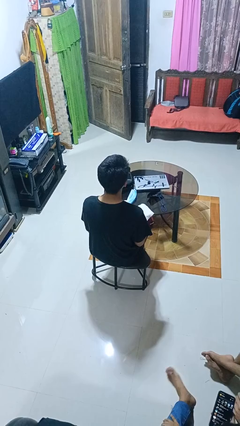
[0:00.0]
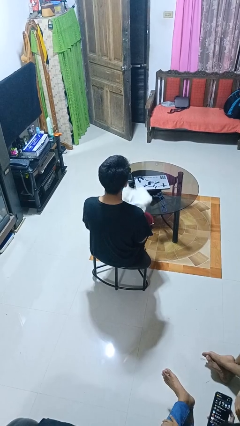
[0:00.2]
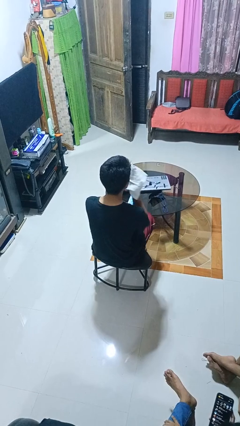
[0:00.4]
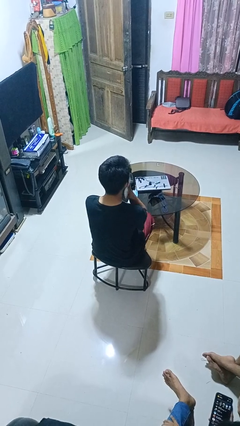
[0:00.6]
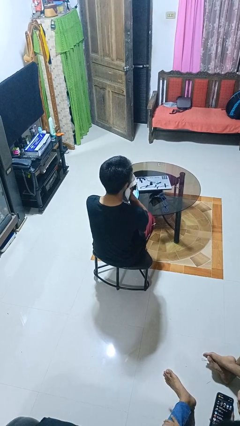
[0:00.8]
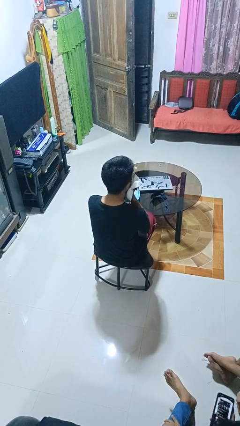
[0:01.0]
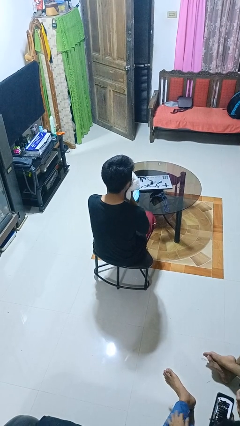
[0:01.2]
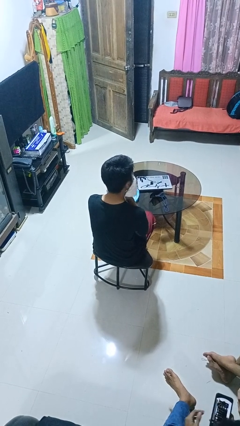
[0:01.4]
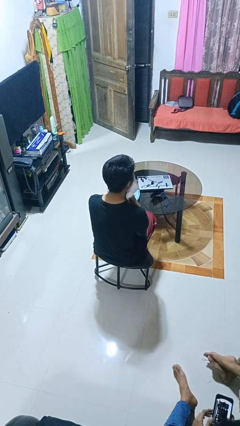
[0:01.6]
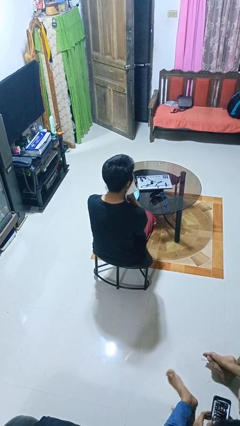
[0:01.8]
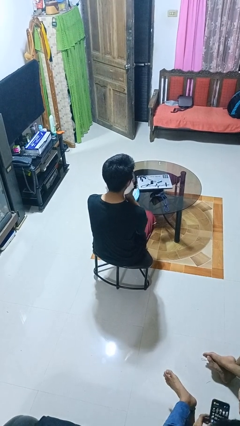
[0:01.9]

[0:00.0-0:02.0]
person wipes mouth with napkin

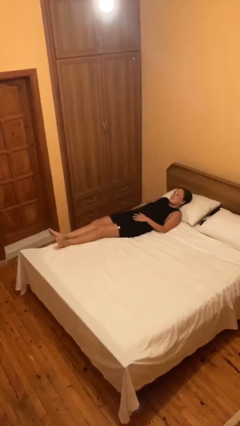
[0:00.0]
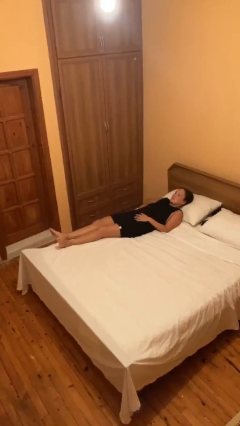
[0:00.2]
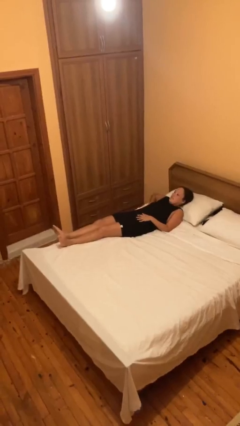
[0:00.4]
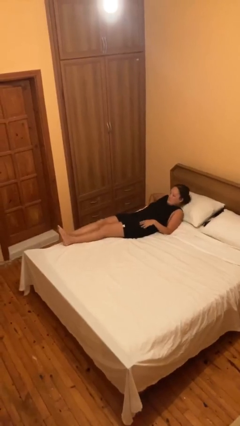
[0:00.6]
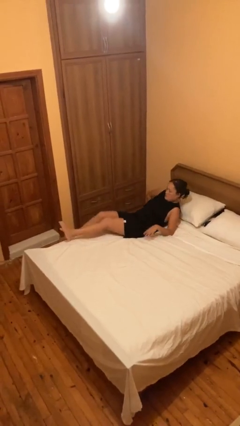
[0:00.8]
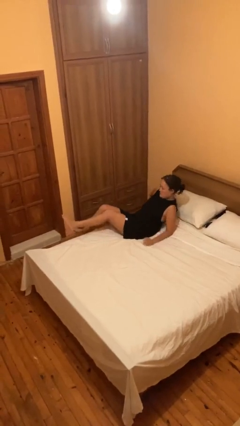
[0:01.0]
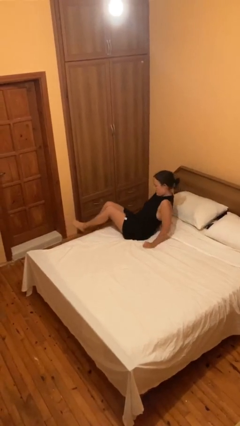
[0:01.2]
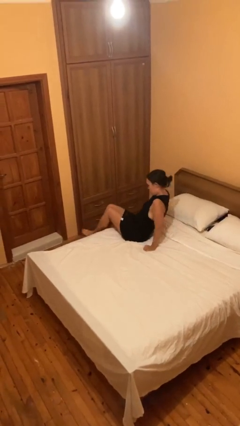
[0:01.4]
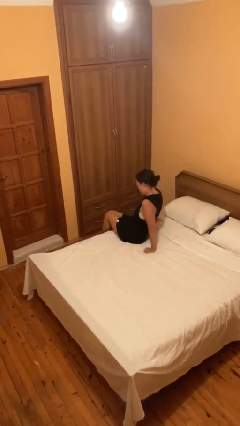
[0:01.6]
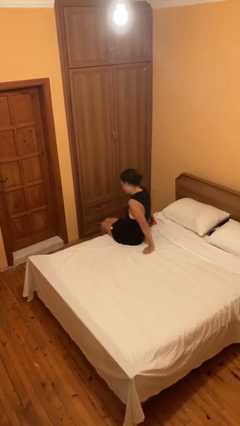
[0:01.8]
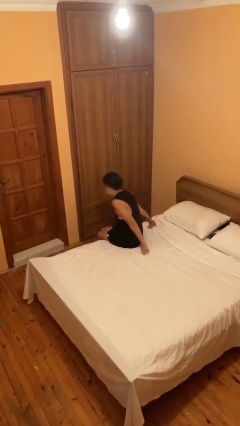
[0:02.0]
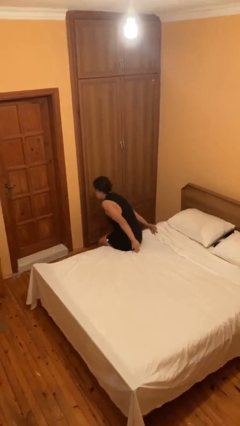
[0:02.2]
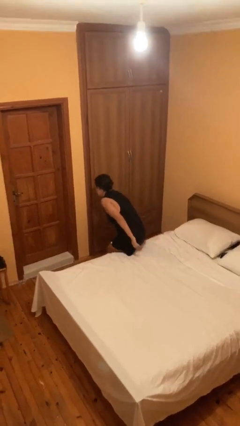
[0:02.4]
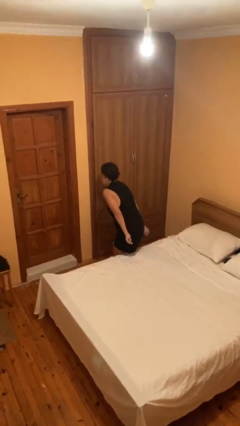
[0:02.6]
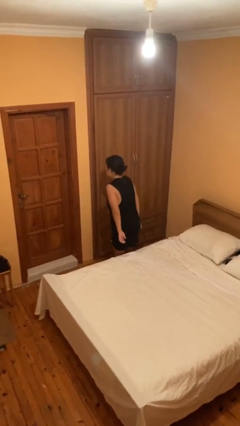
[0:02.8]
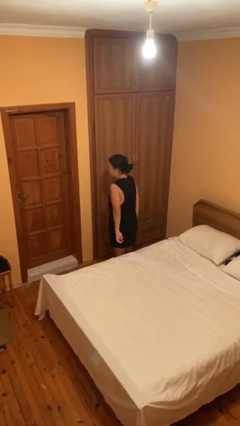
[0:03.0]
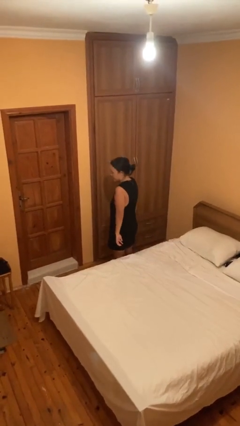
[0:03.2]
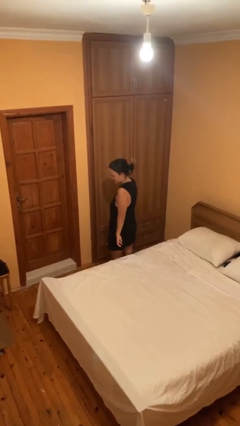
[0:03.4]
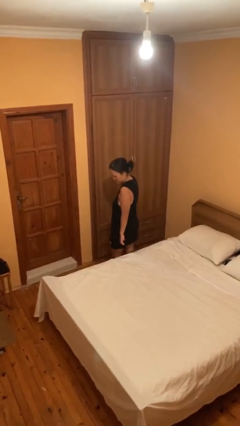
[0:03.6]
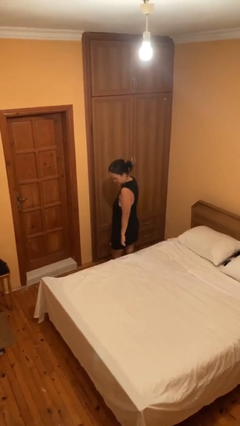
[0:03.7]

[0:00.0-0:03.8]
person stands up

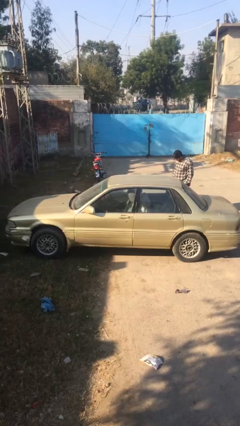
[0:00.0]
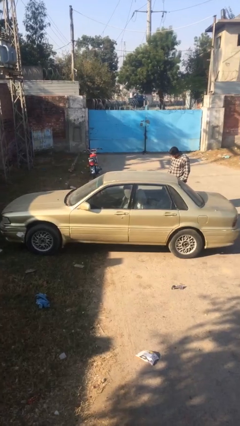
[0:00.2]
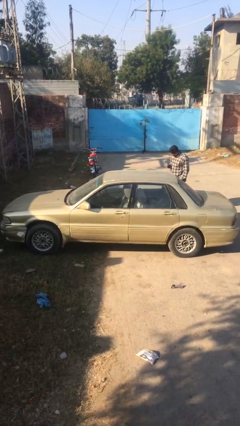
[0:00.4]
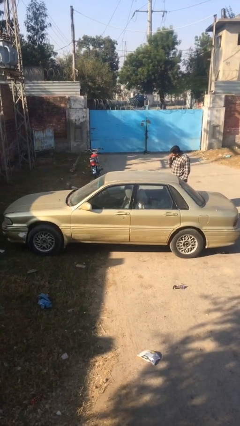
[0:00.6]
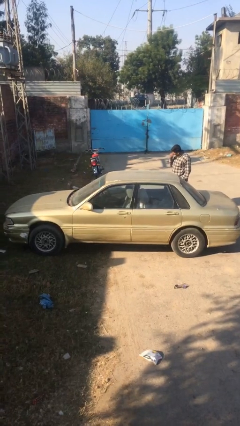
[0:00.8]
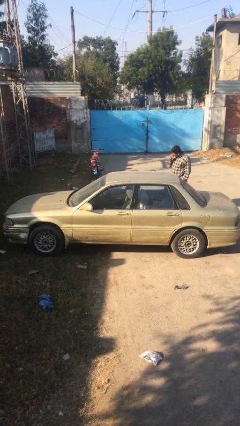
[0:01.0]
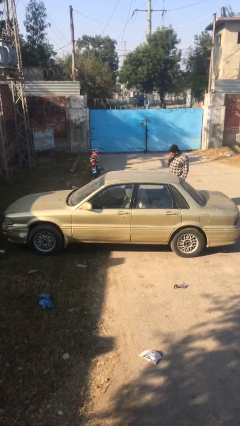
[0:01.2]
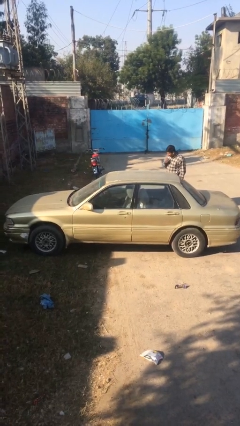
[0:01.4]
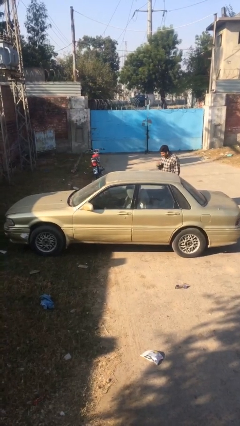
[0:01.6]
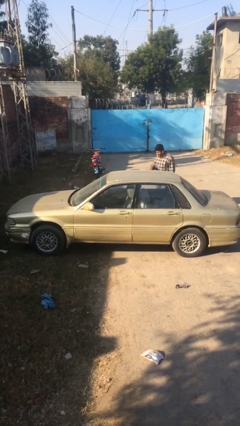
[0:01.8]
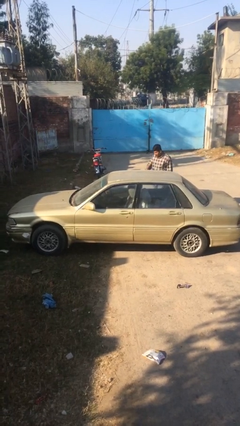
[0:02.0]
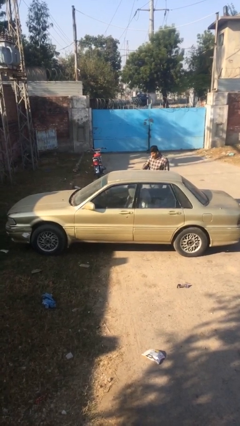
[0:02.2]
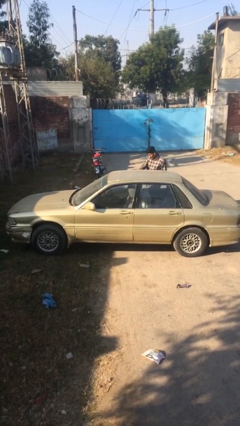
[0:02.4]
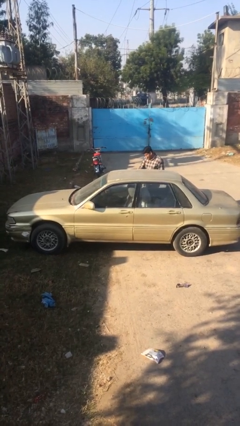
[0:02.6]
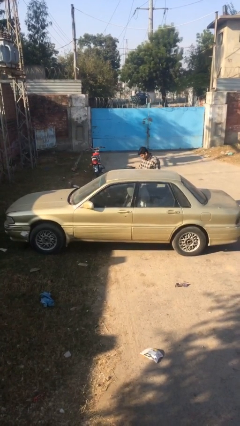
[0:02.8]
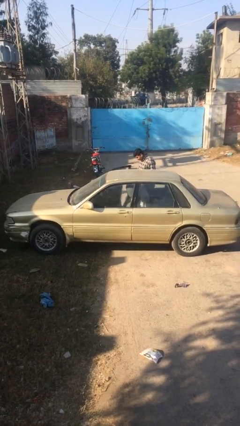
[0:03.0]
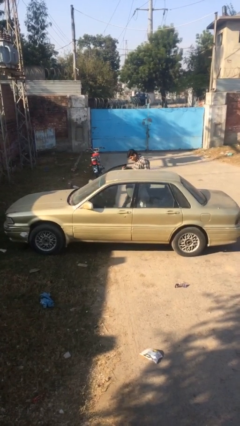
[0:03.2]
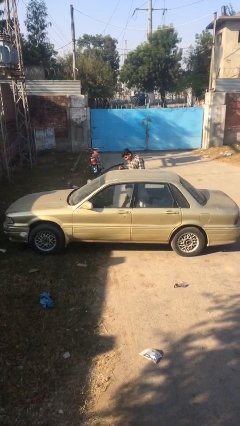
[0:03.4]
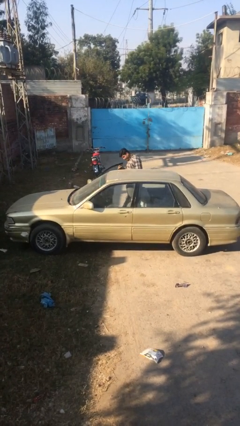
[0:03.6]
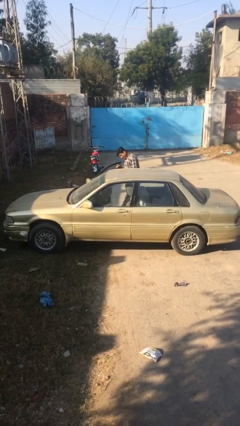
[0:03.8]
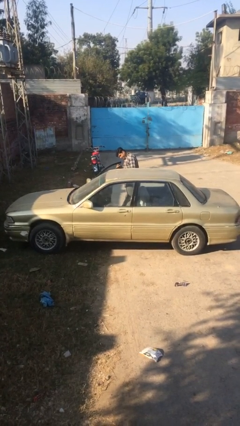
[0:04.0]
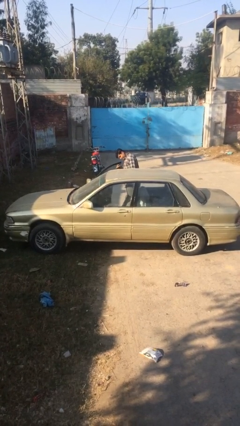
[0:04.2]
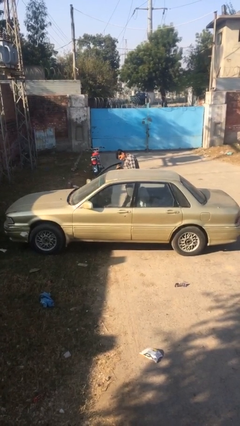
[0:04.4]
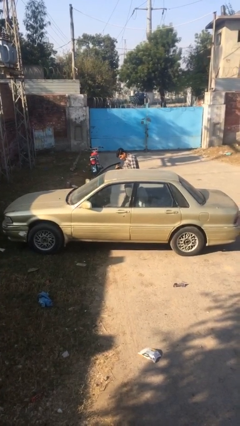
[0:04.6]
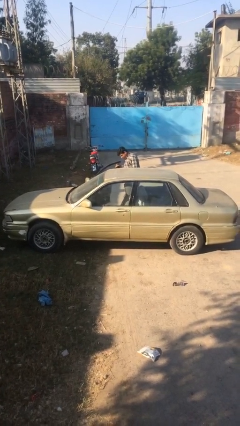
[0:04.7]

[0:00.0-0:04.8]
person opens car door

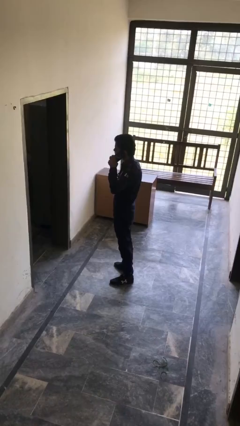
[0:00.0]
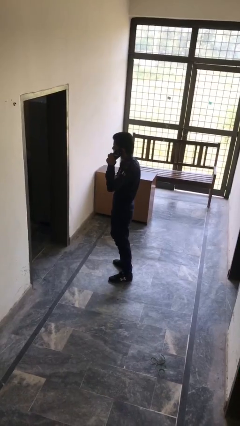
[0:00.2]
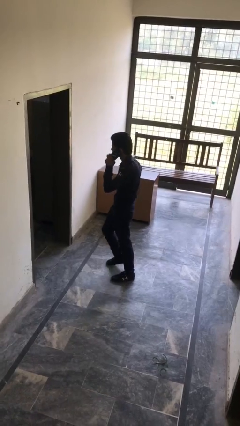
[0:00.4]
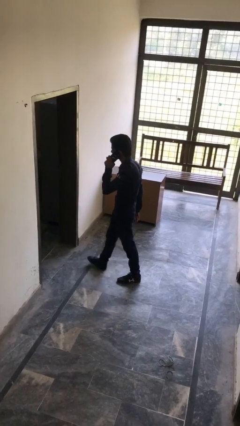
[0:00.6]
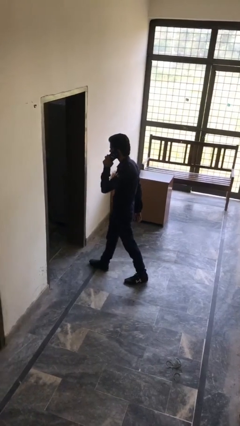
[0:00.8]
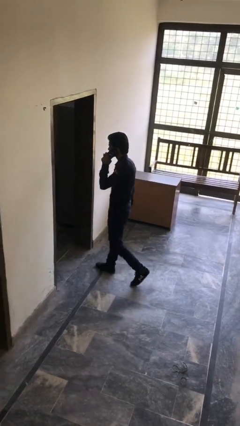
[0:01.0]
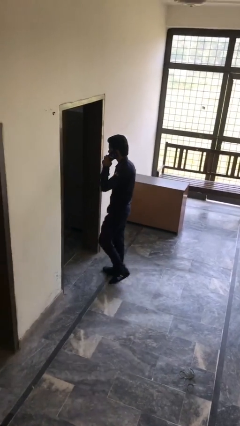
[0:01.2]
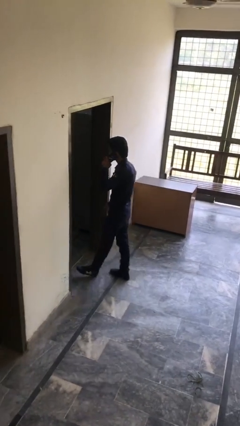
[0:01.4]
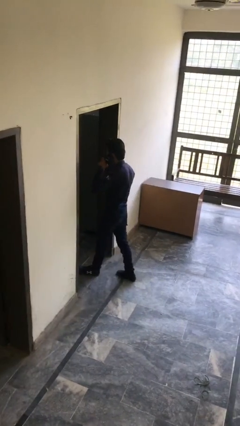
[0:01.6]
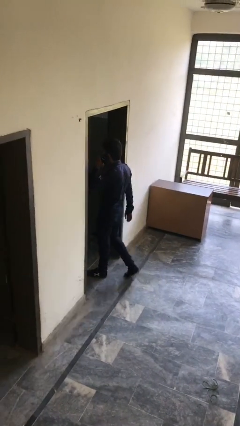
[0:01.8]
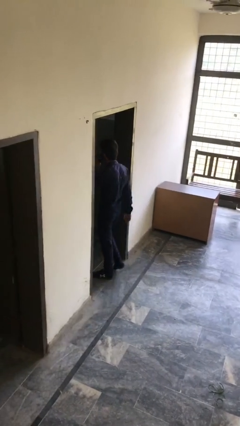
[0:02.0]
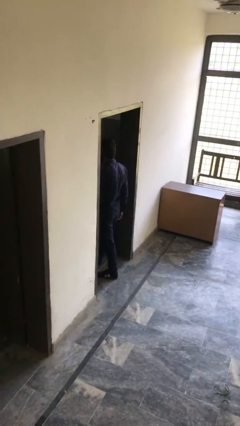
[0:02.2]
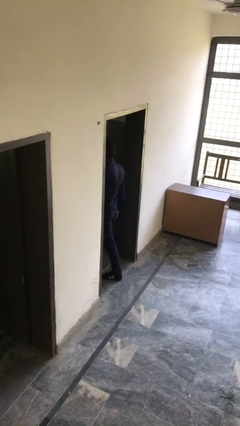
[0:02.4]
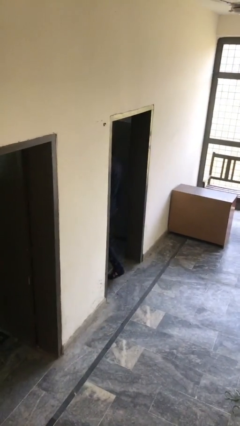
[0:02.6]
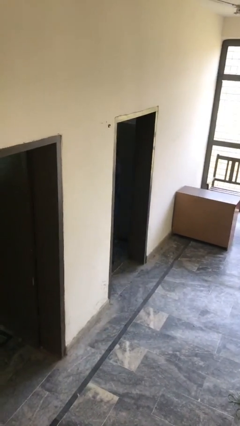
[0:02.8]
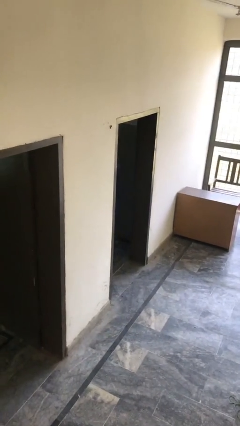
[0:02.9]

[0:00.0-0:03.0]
person exits scene through structure

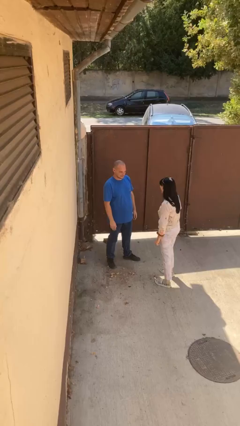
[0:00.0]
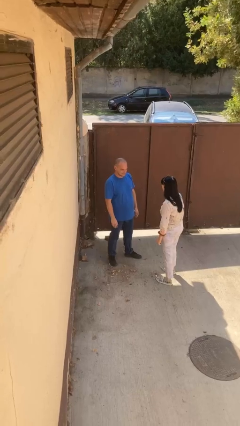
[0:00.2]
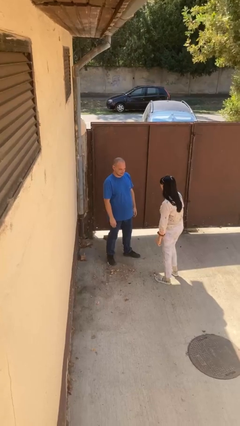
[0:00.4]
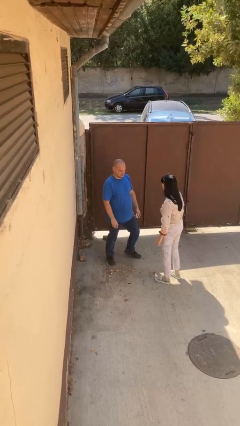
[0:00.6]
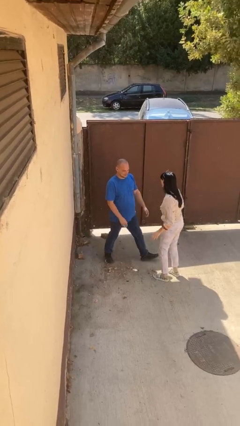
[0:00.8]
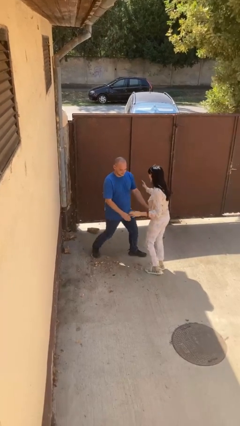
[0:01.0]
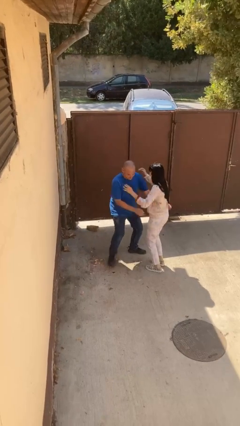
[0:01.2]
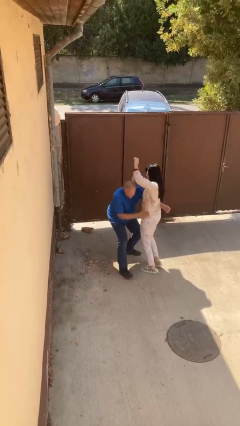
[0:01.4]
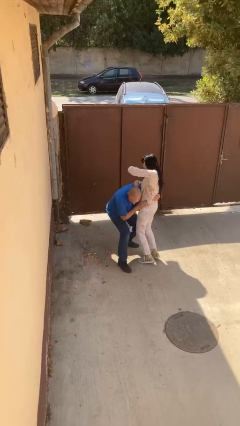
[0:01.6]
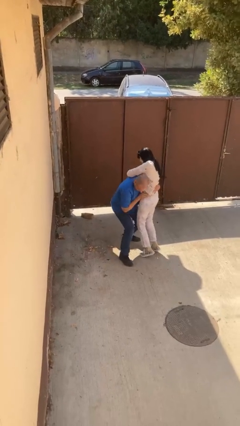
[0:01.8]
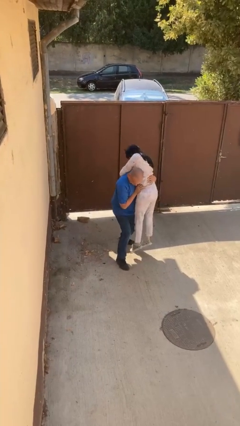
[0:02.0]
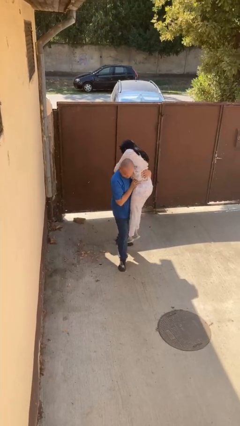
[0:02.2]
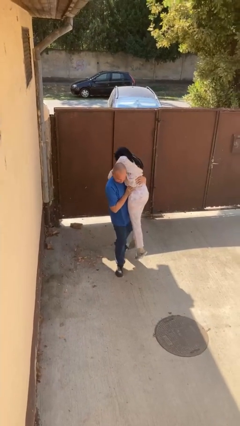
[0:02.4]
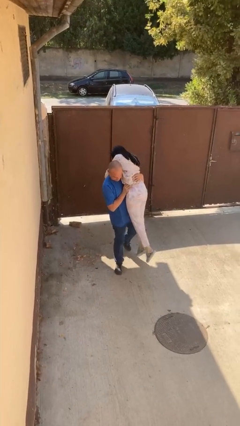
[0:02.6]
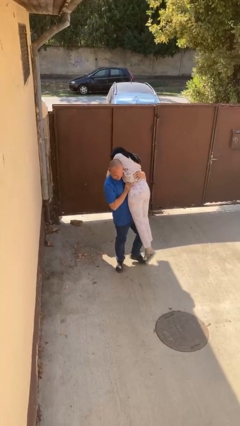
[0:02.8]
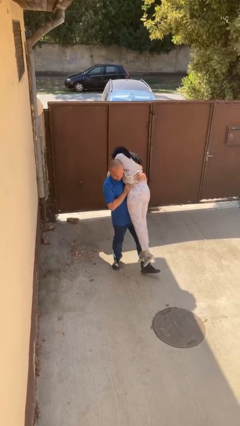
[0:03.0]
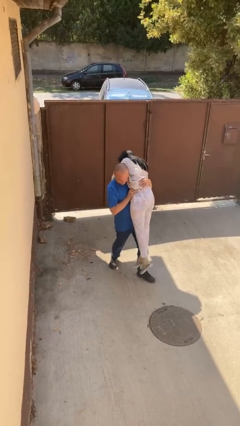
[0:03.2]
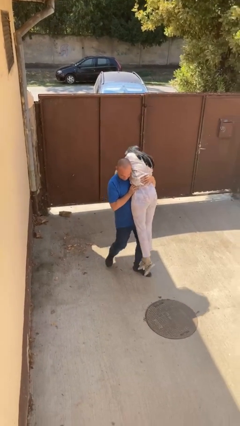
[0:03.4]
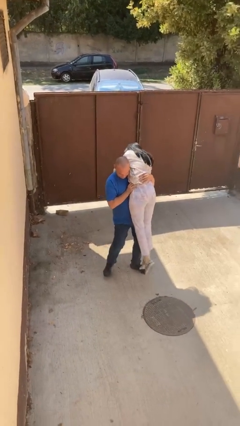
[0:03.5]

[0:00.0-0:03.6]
person carries person over shoulder

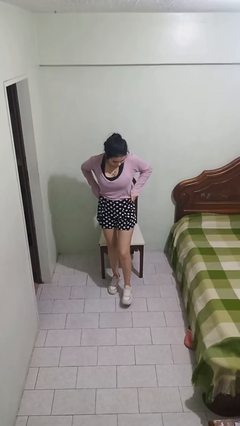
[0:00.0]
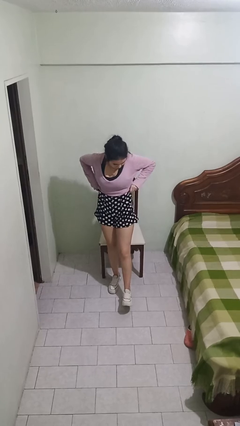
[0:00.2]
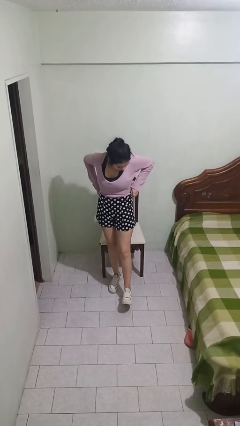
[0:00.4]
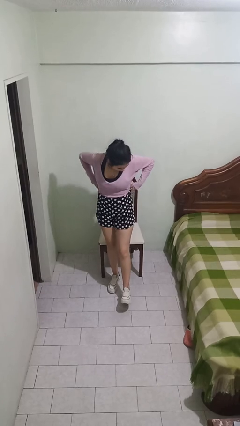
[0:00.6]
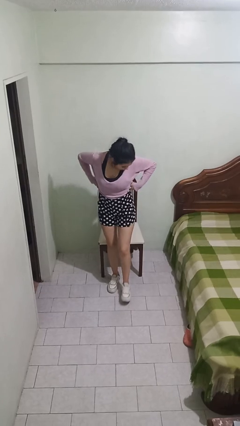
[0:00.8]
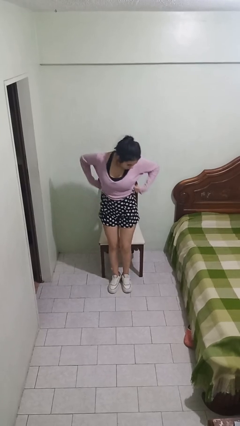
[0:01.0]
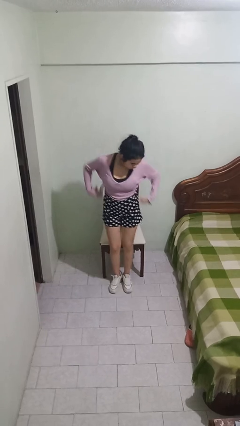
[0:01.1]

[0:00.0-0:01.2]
person hikes up pants
